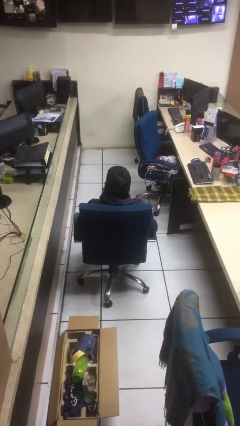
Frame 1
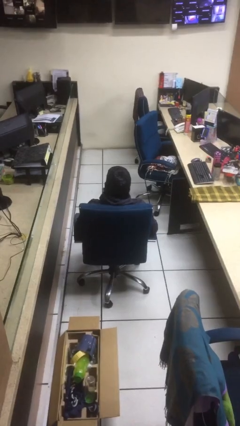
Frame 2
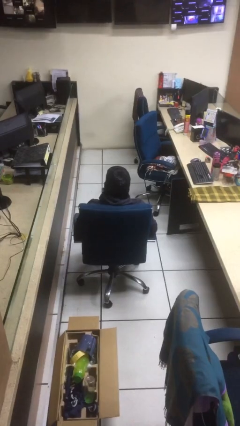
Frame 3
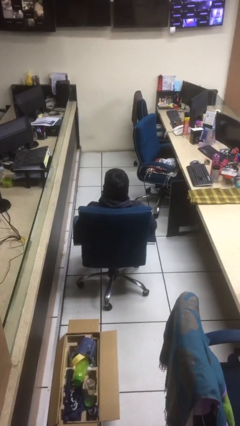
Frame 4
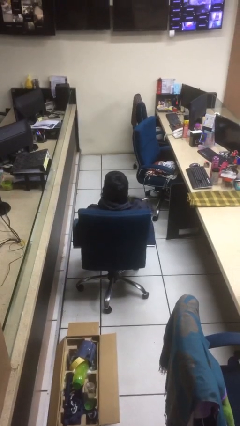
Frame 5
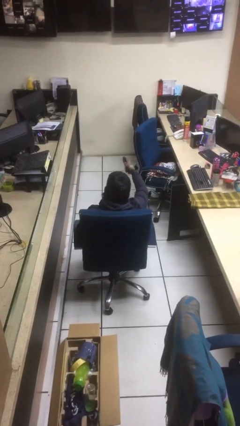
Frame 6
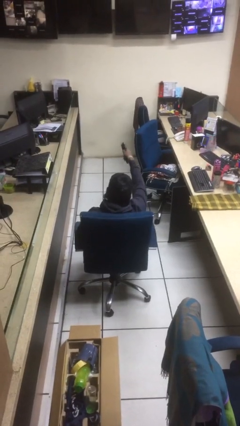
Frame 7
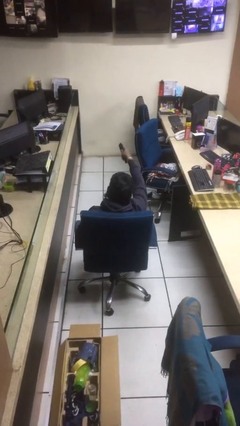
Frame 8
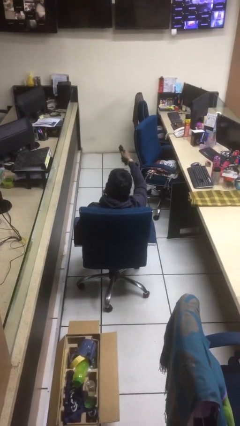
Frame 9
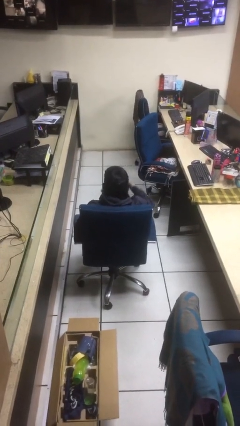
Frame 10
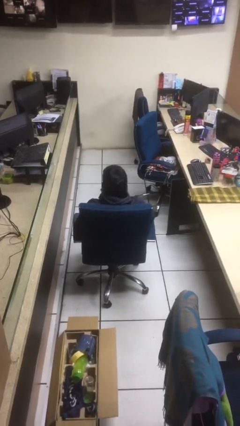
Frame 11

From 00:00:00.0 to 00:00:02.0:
person uses television remote

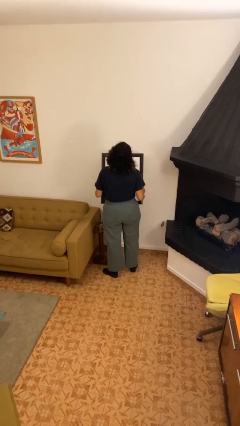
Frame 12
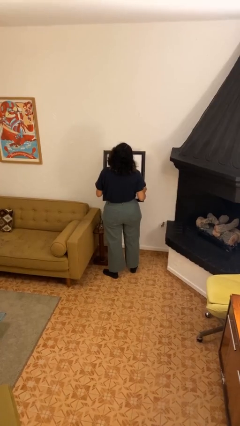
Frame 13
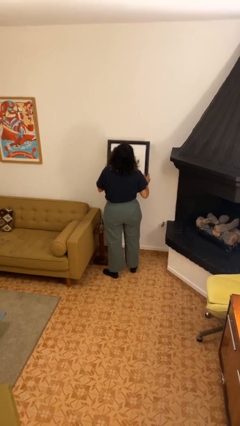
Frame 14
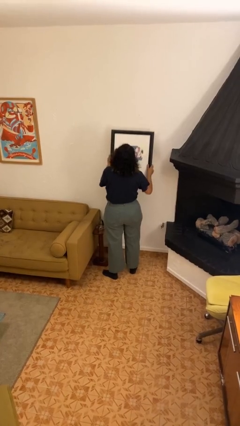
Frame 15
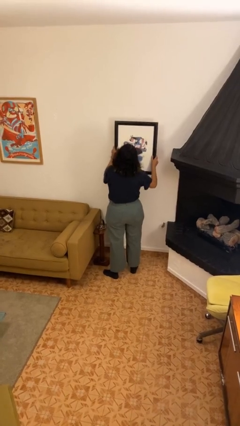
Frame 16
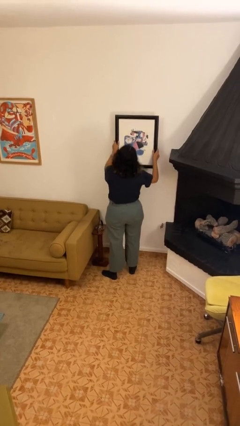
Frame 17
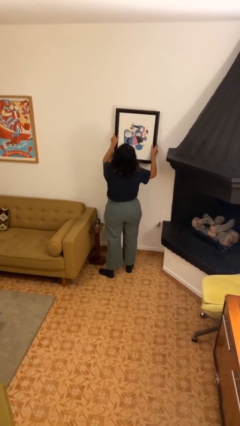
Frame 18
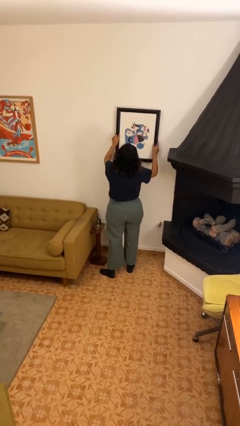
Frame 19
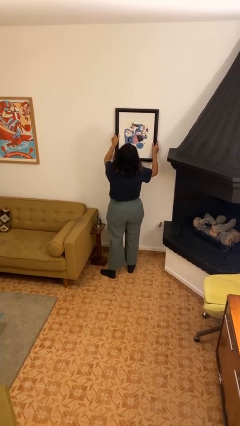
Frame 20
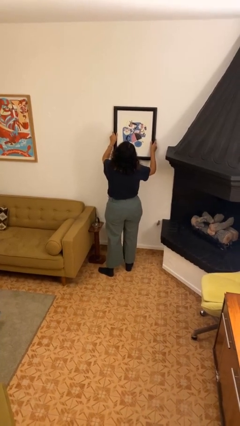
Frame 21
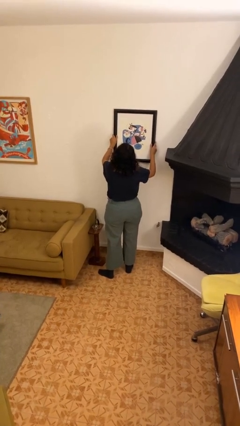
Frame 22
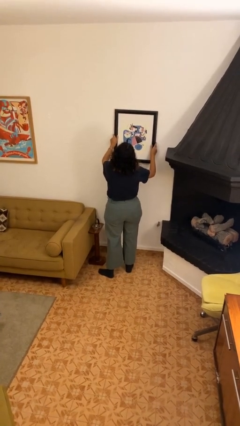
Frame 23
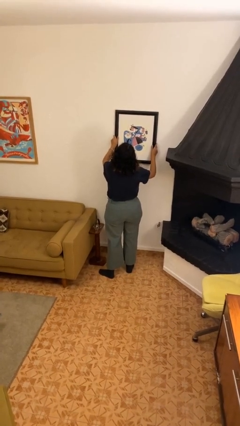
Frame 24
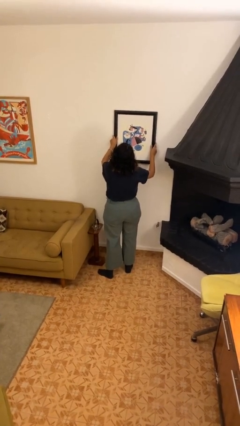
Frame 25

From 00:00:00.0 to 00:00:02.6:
person puts up picture frame

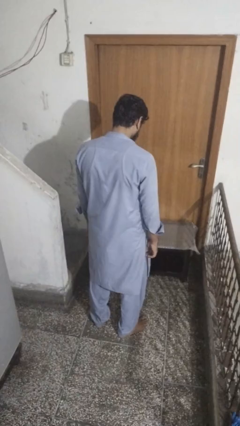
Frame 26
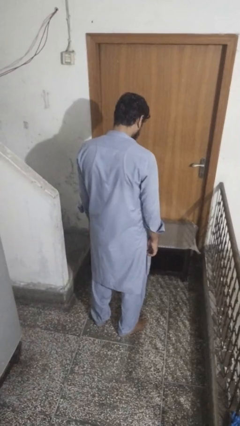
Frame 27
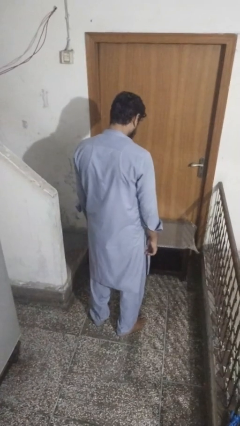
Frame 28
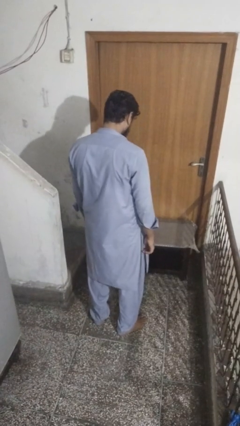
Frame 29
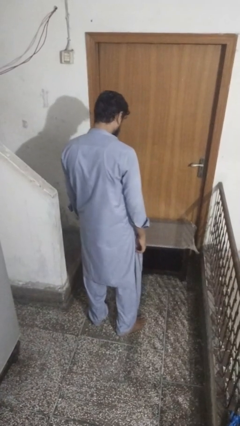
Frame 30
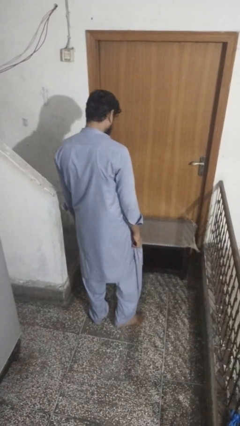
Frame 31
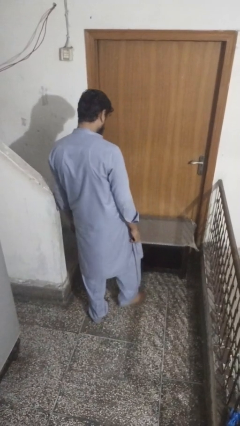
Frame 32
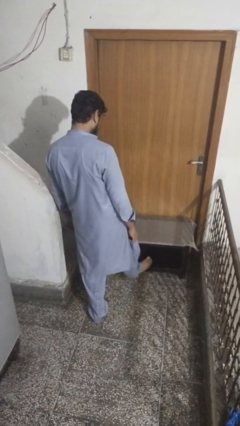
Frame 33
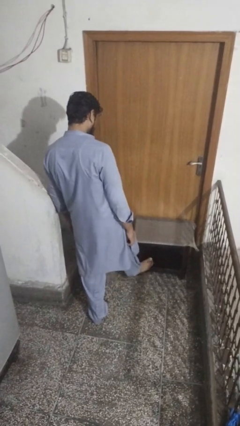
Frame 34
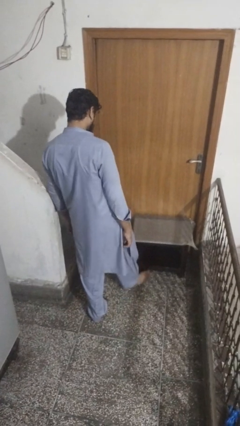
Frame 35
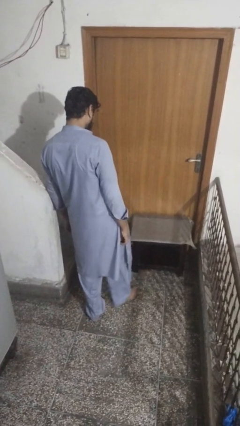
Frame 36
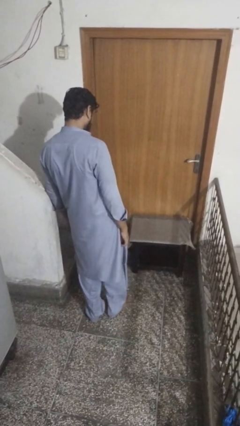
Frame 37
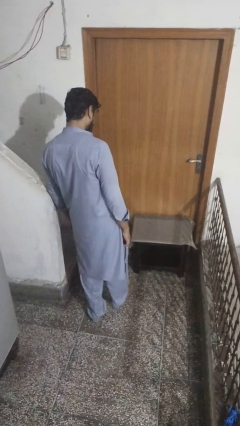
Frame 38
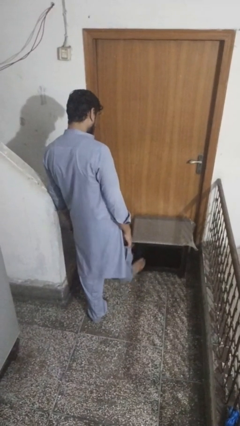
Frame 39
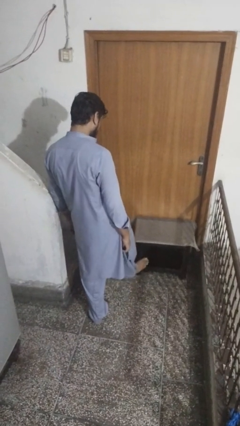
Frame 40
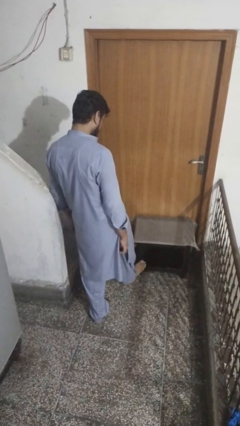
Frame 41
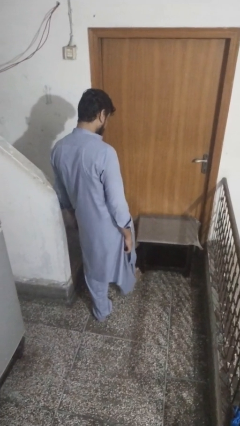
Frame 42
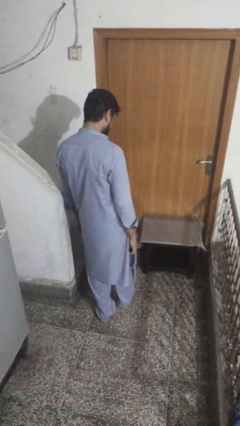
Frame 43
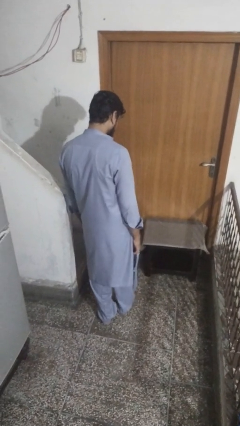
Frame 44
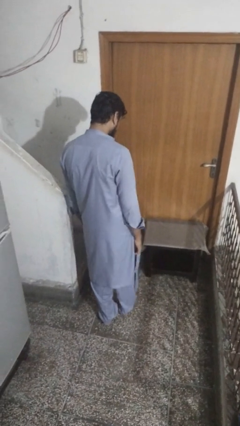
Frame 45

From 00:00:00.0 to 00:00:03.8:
person stubs toe

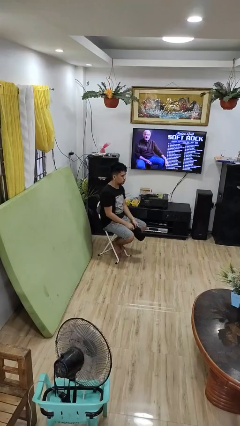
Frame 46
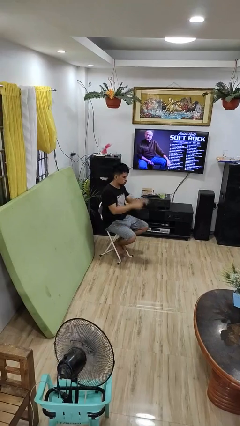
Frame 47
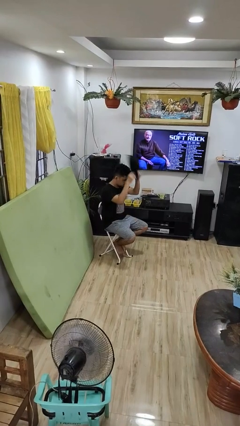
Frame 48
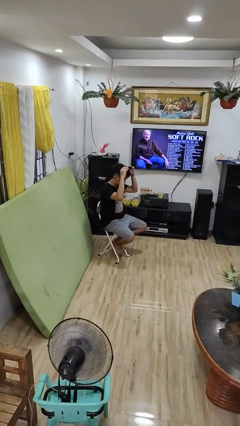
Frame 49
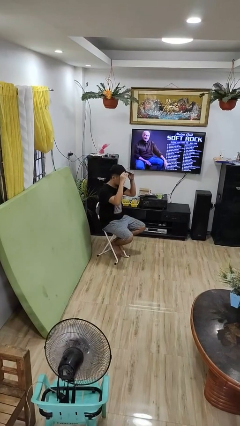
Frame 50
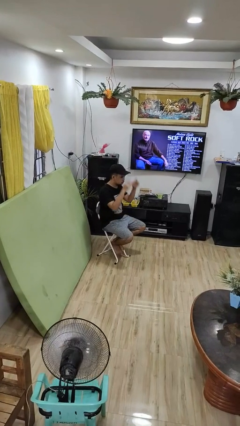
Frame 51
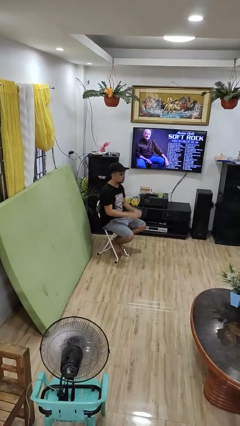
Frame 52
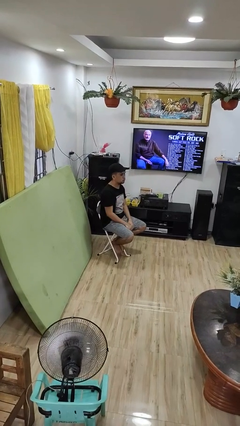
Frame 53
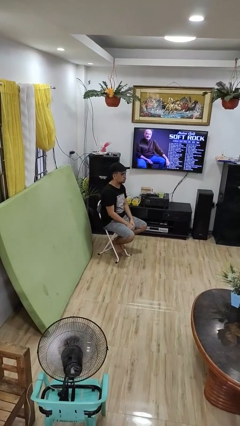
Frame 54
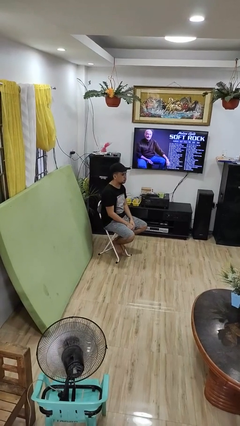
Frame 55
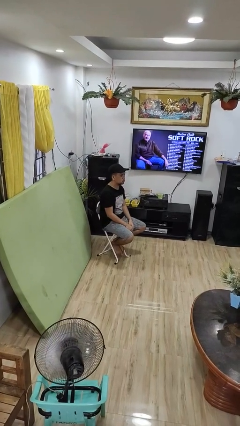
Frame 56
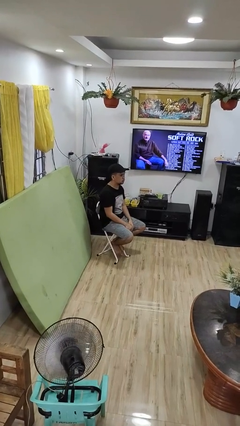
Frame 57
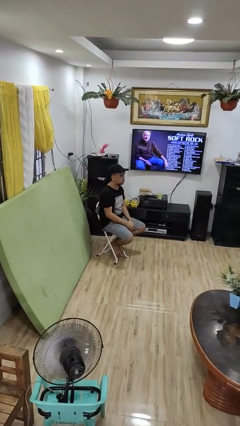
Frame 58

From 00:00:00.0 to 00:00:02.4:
person puts on hat

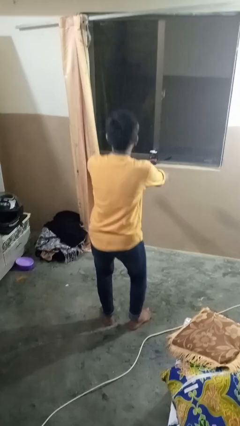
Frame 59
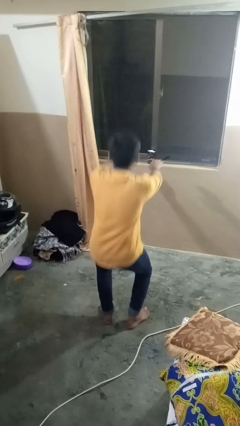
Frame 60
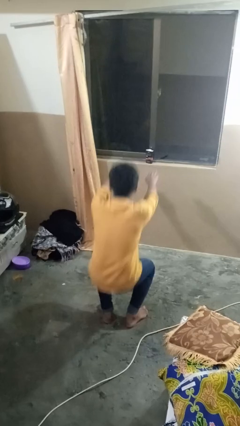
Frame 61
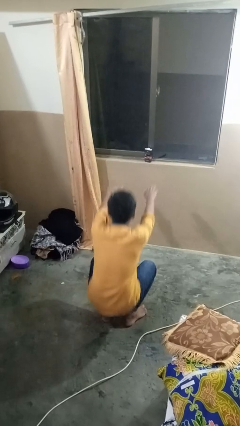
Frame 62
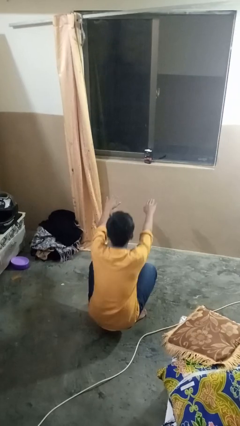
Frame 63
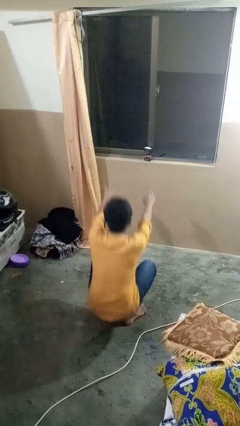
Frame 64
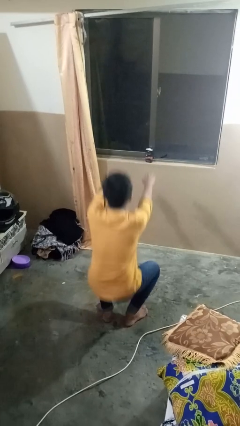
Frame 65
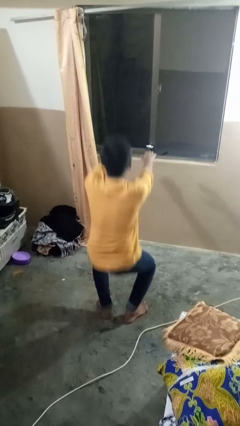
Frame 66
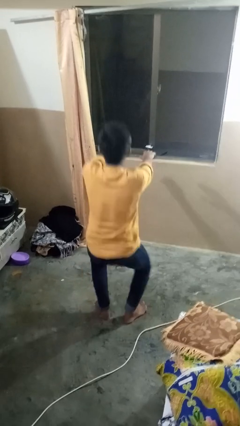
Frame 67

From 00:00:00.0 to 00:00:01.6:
person squats

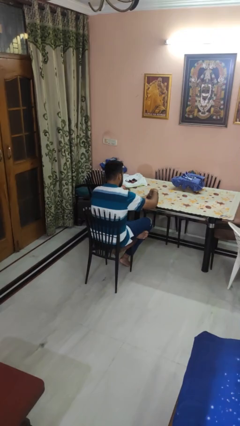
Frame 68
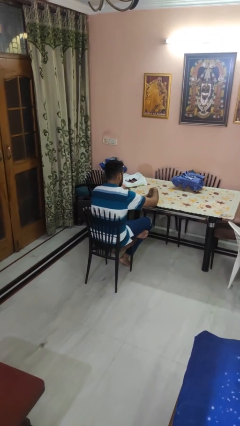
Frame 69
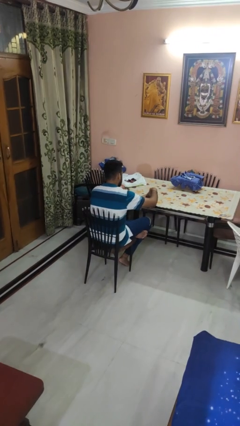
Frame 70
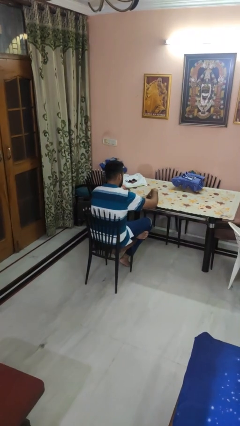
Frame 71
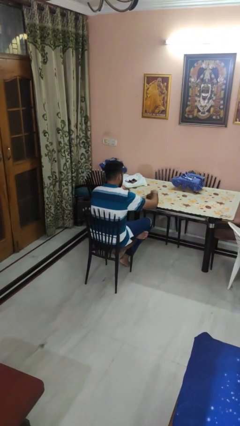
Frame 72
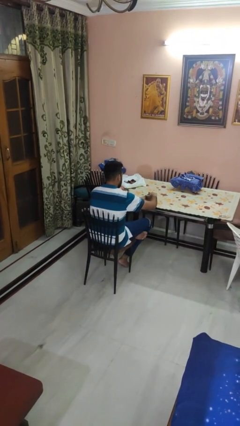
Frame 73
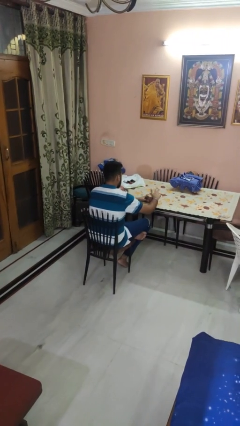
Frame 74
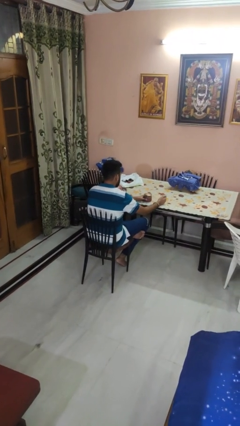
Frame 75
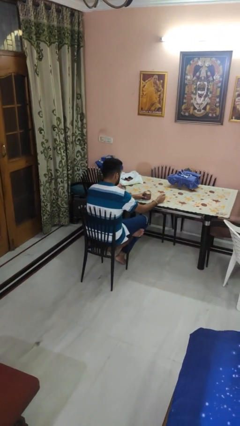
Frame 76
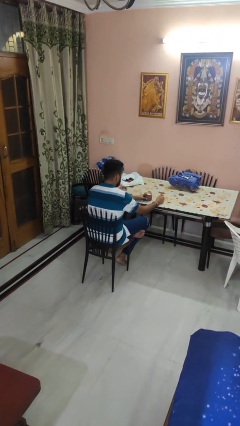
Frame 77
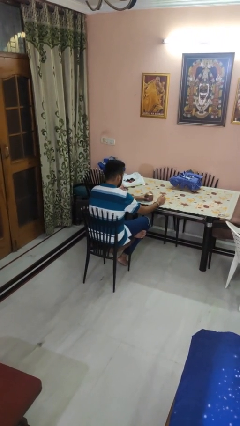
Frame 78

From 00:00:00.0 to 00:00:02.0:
person closes jar

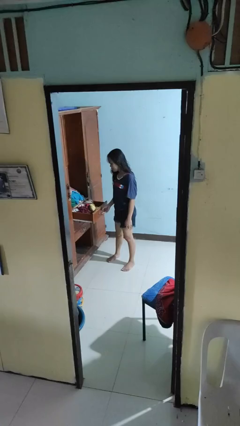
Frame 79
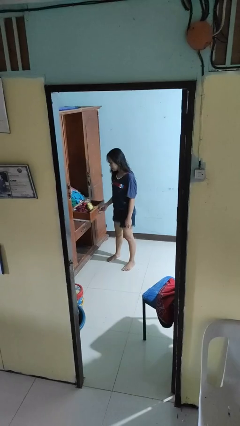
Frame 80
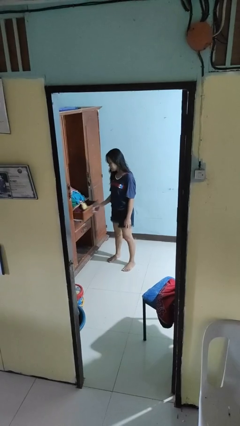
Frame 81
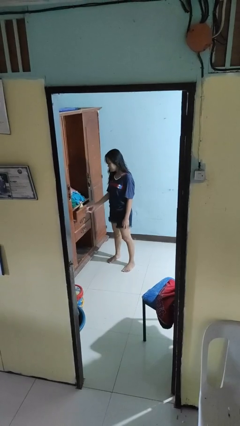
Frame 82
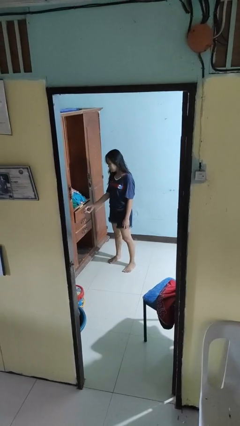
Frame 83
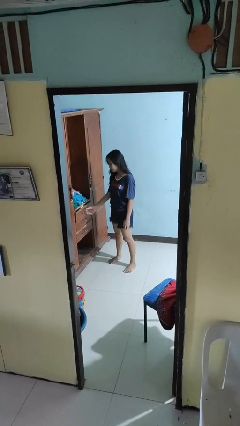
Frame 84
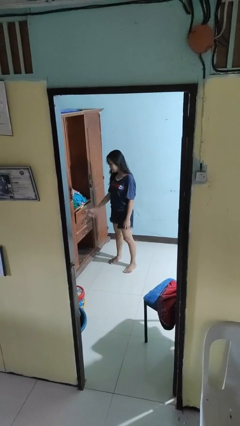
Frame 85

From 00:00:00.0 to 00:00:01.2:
person closes dresser drawer

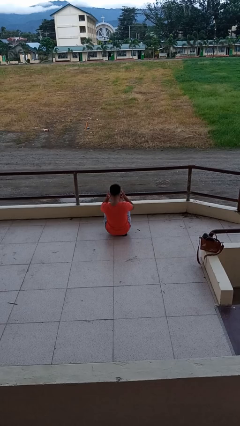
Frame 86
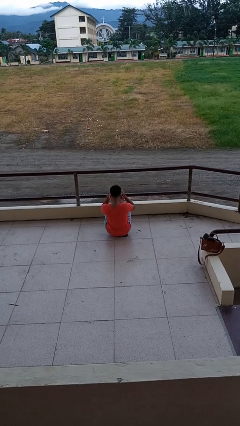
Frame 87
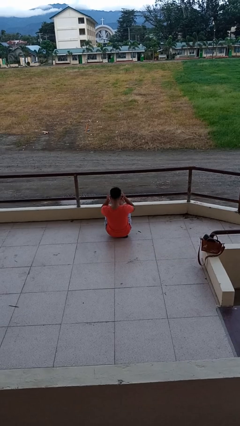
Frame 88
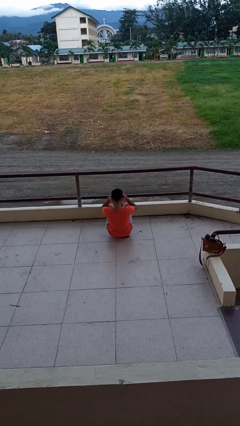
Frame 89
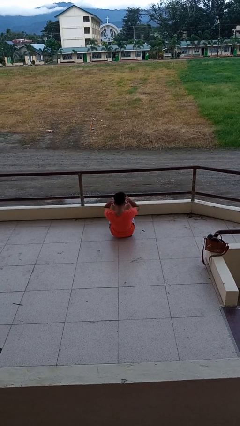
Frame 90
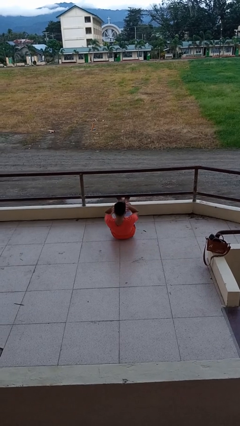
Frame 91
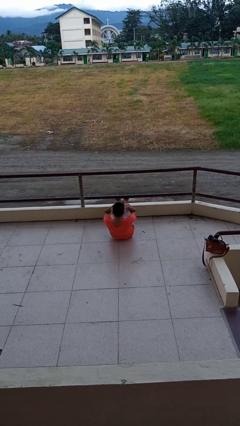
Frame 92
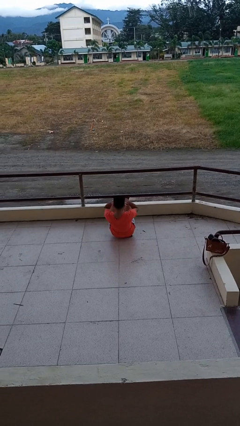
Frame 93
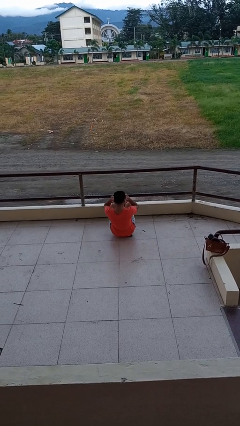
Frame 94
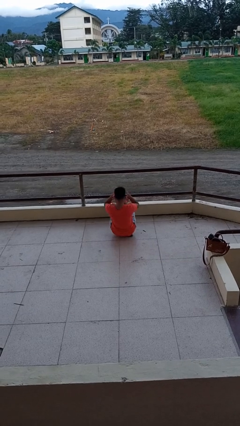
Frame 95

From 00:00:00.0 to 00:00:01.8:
person exercises with situp
